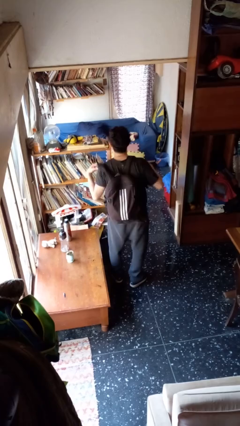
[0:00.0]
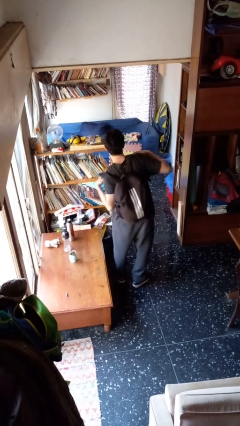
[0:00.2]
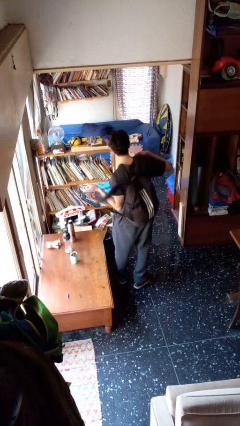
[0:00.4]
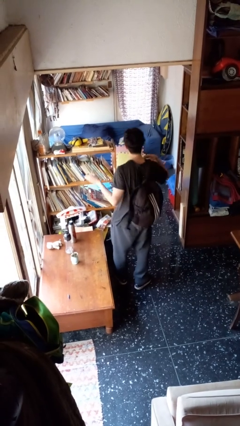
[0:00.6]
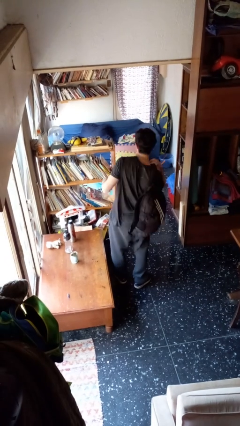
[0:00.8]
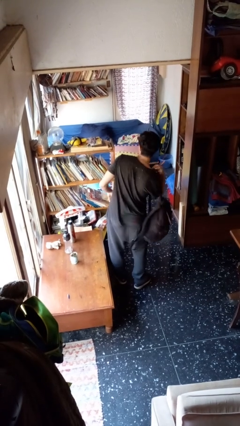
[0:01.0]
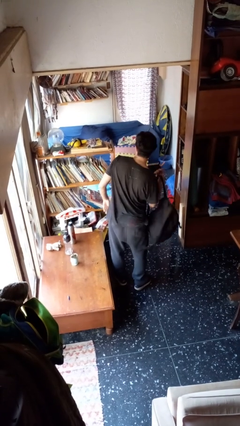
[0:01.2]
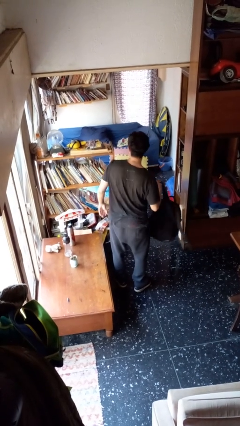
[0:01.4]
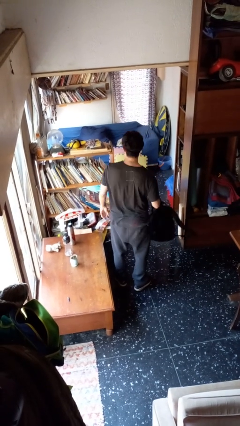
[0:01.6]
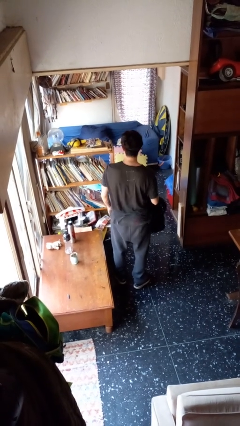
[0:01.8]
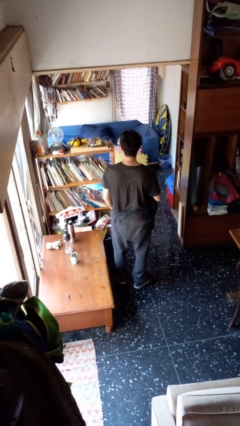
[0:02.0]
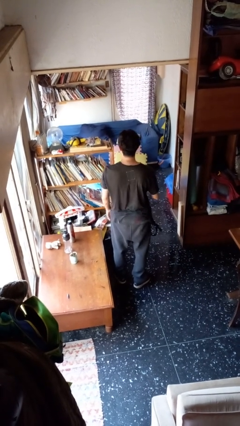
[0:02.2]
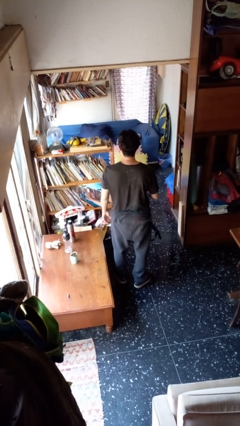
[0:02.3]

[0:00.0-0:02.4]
person takes off backpack

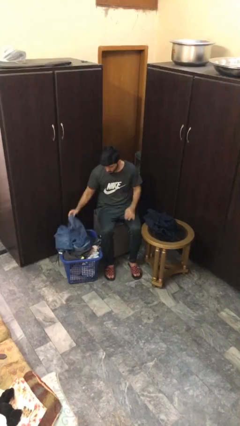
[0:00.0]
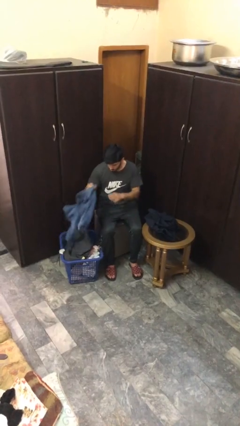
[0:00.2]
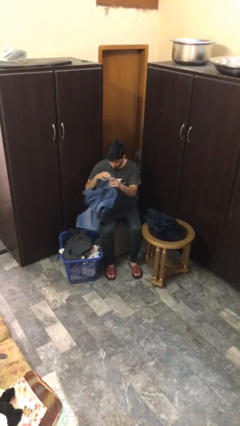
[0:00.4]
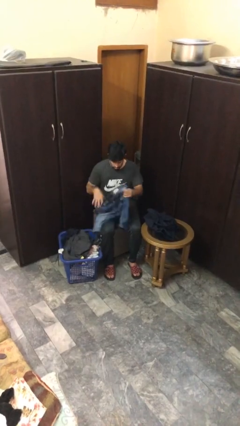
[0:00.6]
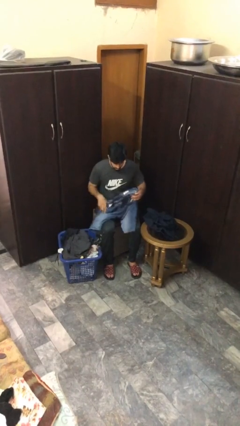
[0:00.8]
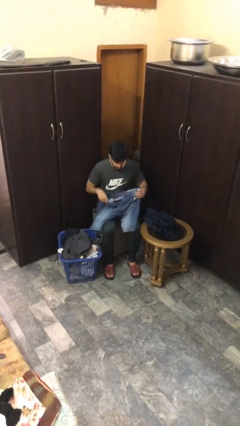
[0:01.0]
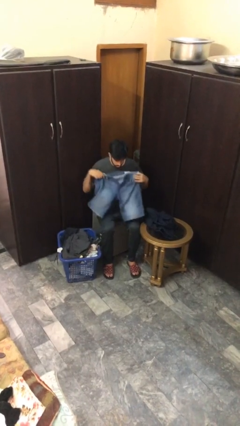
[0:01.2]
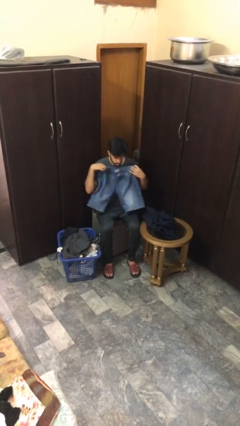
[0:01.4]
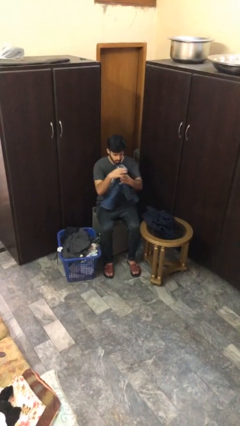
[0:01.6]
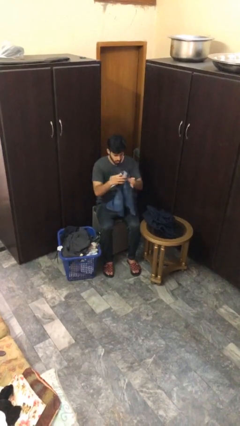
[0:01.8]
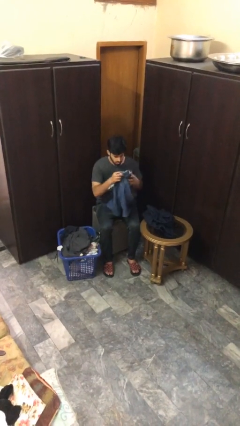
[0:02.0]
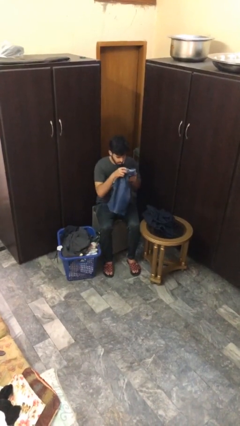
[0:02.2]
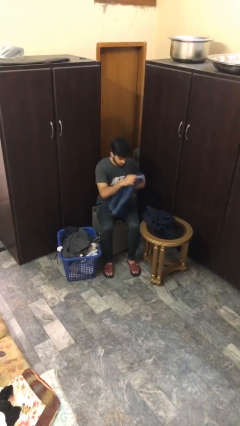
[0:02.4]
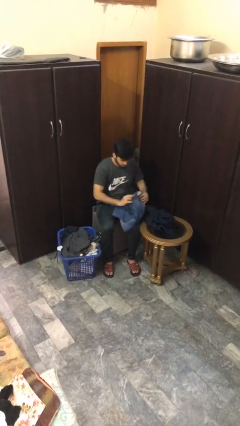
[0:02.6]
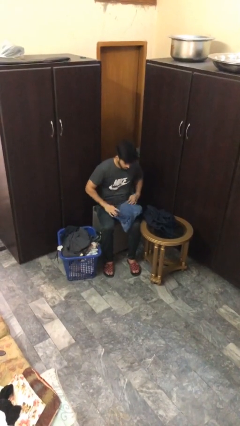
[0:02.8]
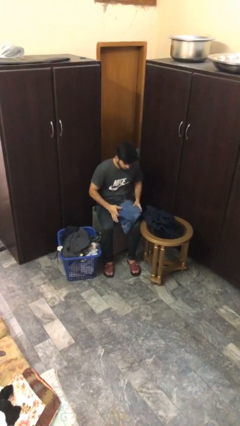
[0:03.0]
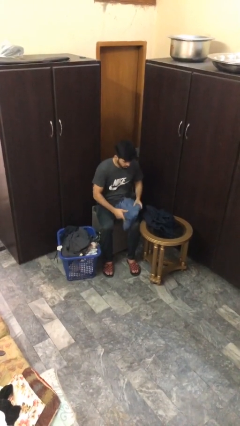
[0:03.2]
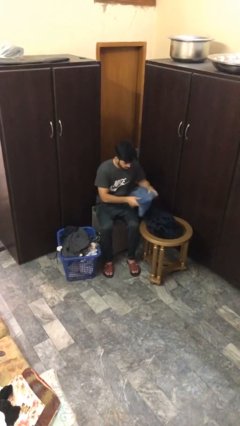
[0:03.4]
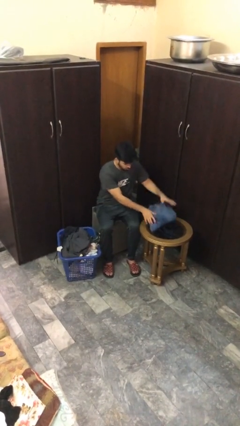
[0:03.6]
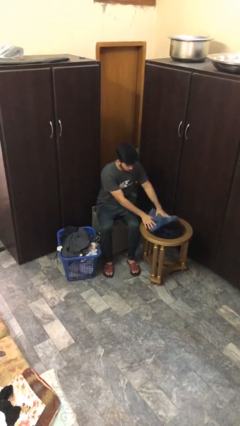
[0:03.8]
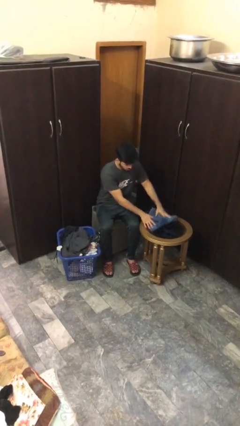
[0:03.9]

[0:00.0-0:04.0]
person folds pants

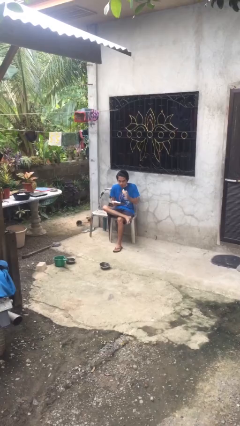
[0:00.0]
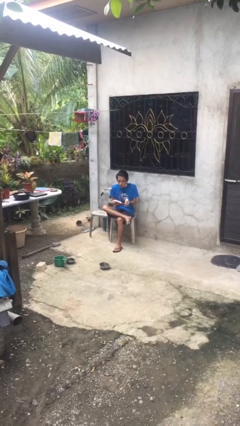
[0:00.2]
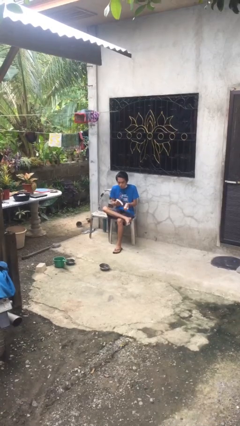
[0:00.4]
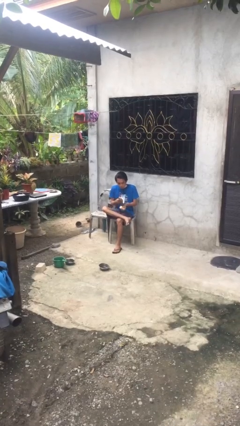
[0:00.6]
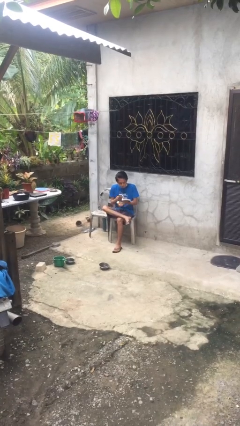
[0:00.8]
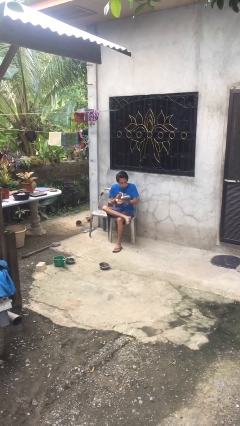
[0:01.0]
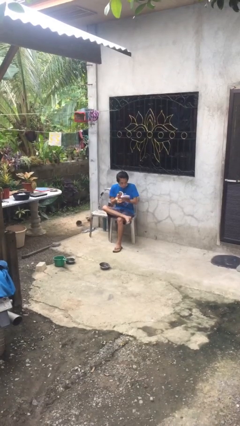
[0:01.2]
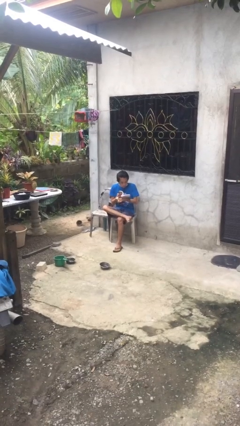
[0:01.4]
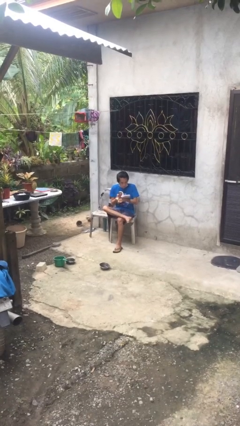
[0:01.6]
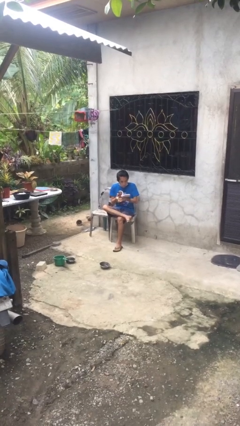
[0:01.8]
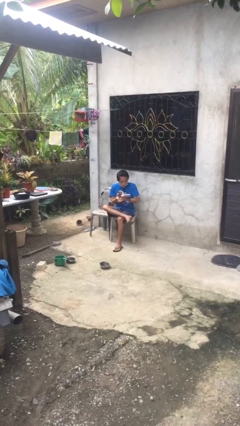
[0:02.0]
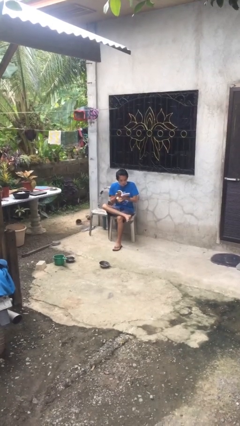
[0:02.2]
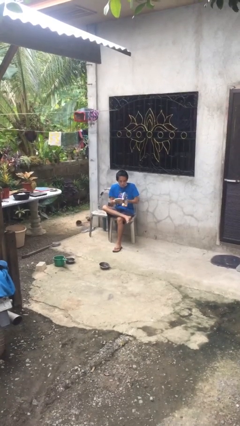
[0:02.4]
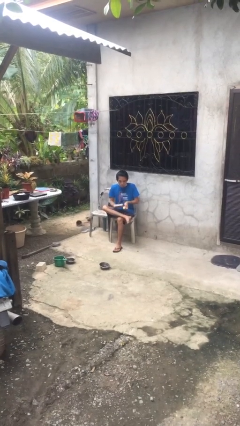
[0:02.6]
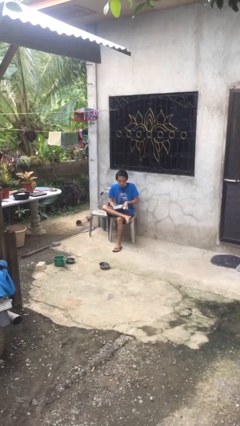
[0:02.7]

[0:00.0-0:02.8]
person reads document

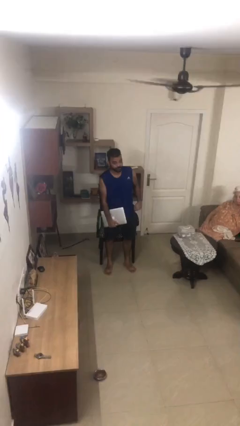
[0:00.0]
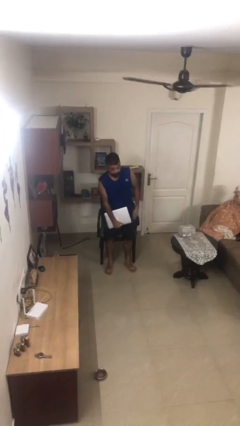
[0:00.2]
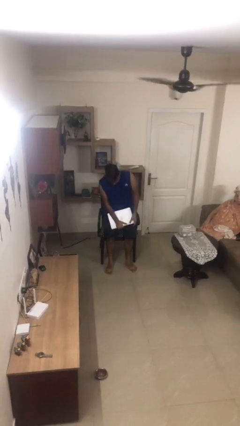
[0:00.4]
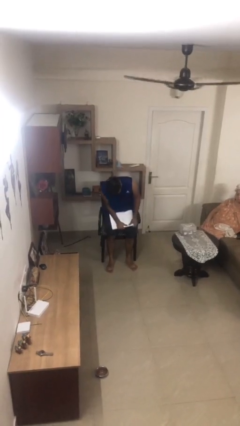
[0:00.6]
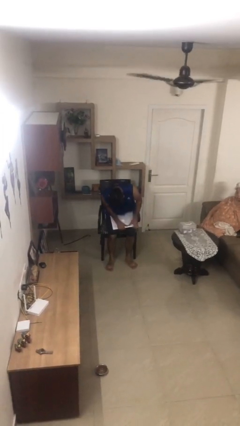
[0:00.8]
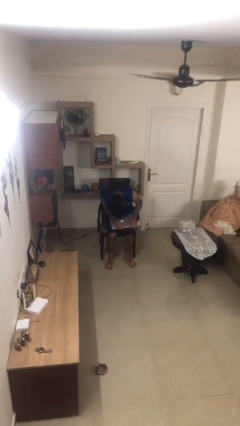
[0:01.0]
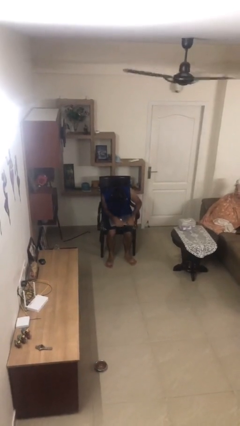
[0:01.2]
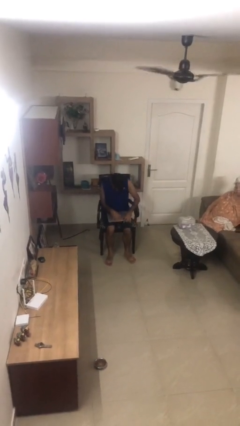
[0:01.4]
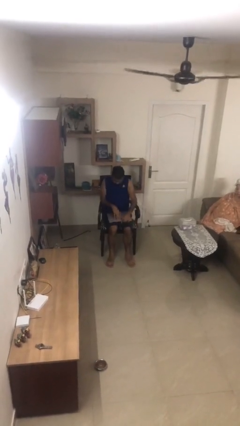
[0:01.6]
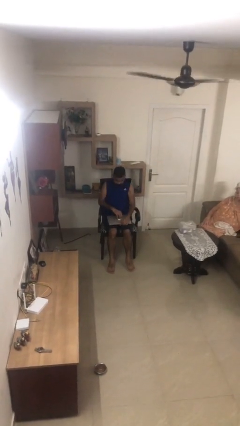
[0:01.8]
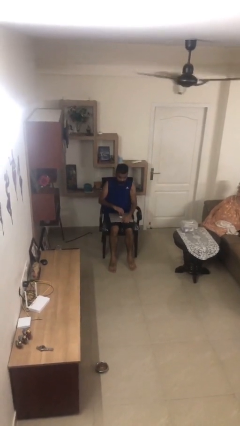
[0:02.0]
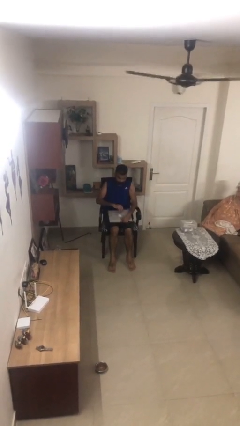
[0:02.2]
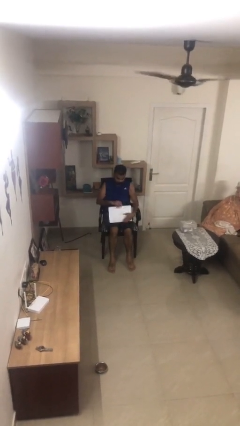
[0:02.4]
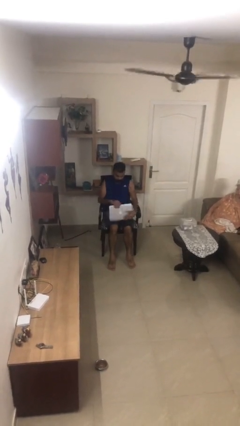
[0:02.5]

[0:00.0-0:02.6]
person sits down

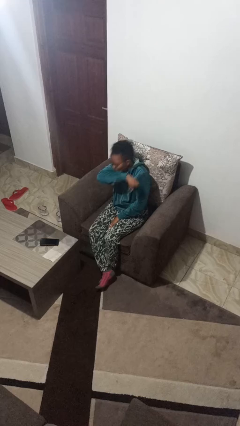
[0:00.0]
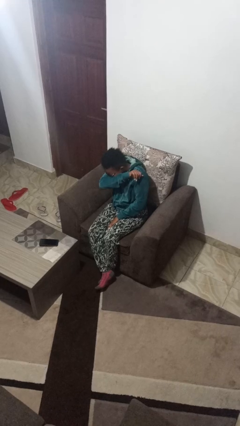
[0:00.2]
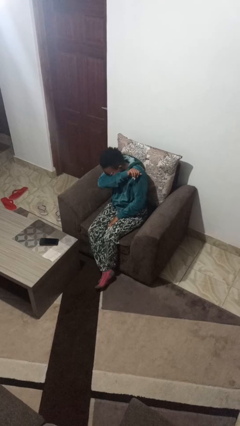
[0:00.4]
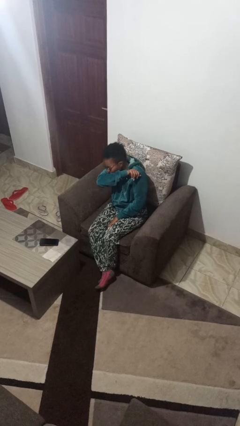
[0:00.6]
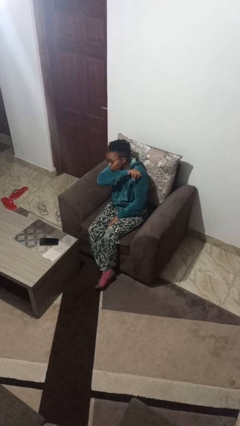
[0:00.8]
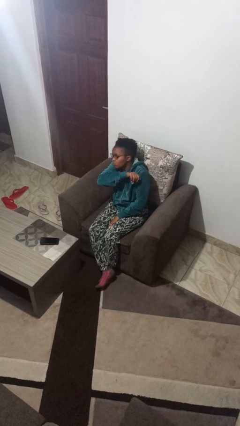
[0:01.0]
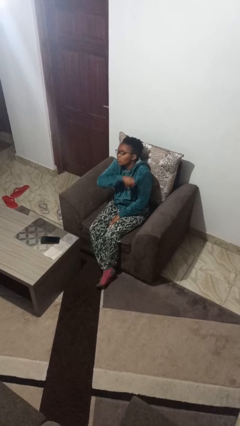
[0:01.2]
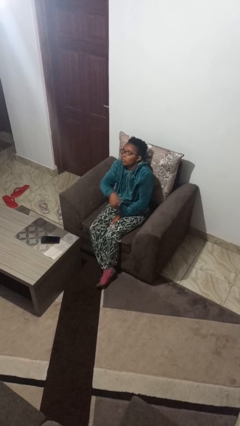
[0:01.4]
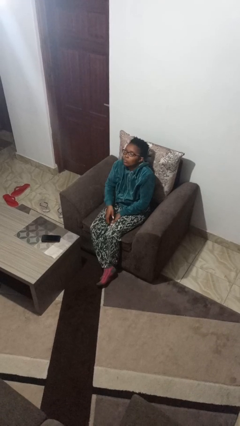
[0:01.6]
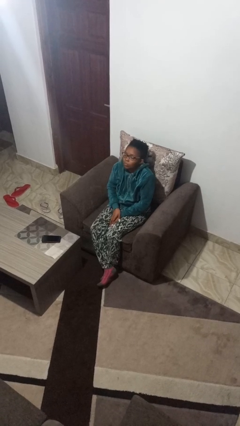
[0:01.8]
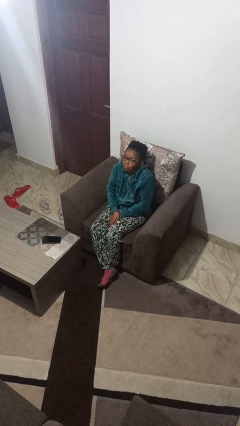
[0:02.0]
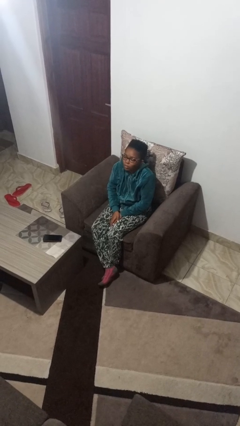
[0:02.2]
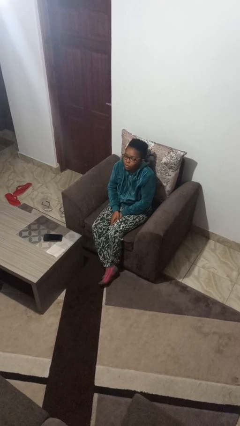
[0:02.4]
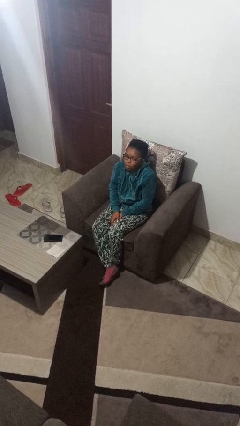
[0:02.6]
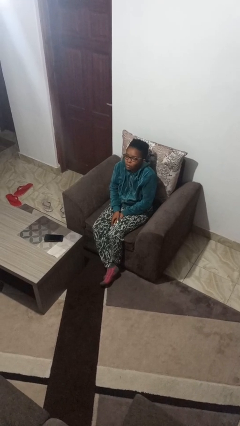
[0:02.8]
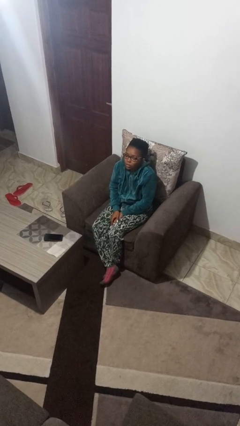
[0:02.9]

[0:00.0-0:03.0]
person sneezes into arm

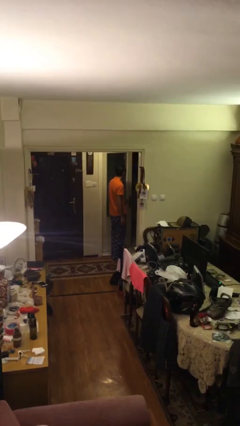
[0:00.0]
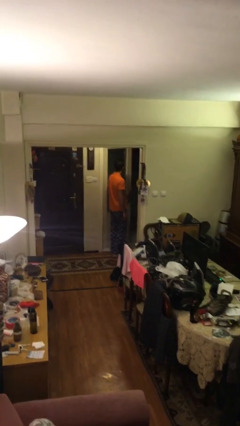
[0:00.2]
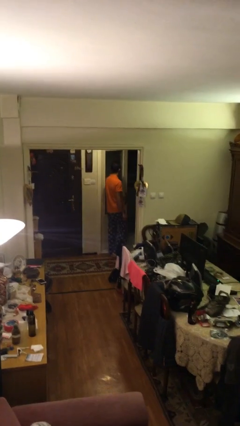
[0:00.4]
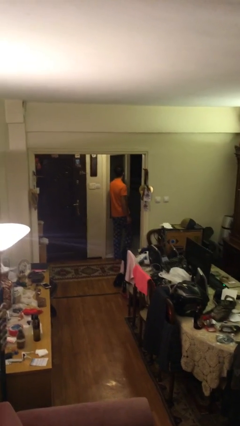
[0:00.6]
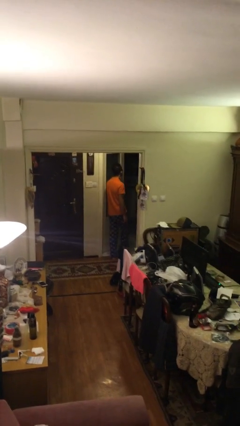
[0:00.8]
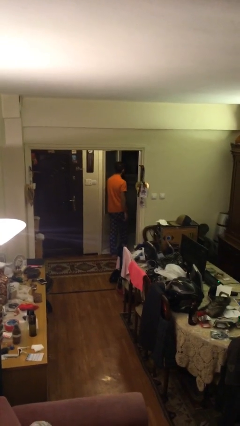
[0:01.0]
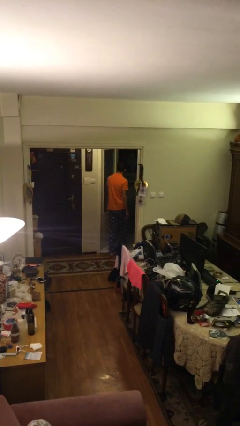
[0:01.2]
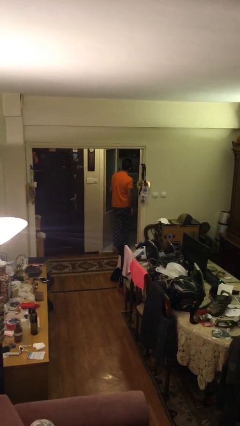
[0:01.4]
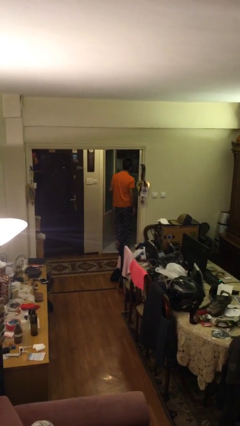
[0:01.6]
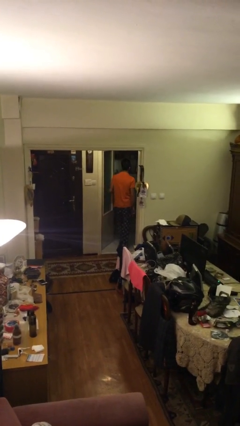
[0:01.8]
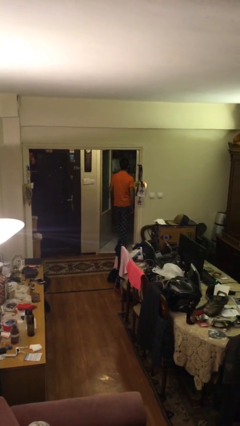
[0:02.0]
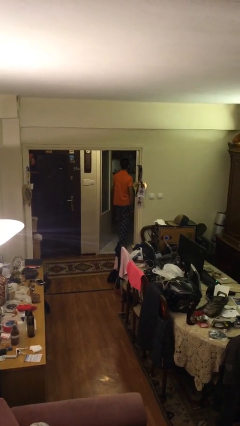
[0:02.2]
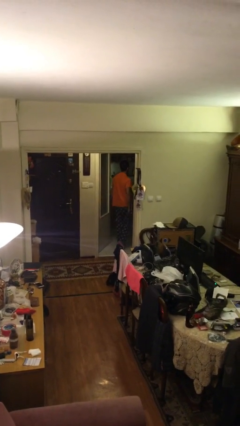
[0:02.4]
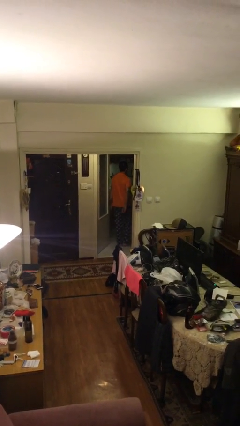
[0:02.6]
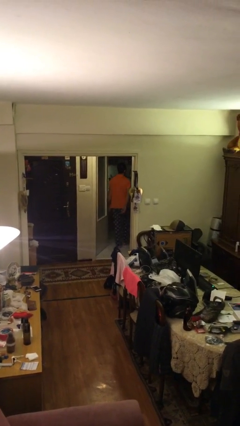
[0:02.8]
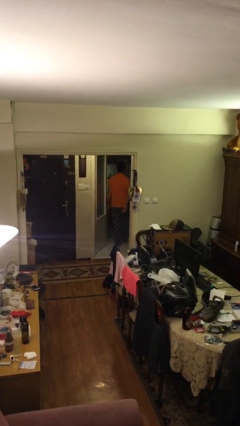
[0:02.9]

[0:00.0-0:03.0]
person exits scene through structure
